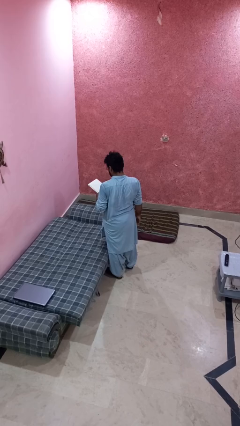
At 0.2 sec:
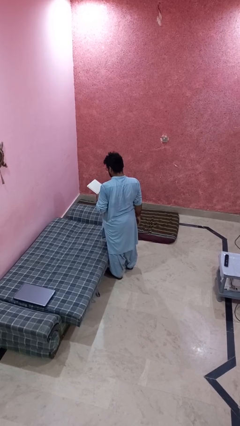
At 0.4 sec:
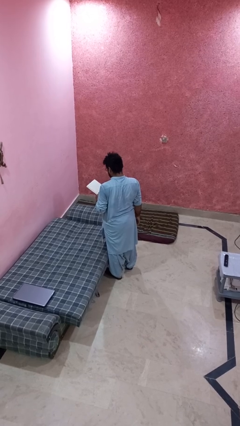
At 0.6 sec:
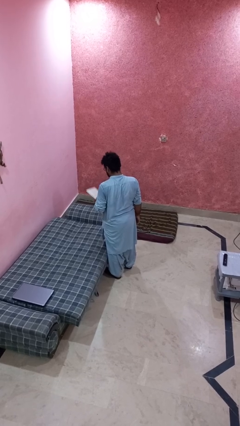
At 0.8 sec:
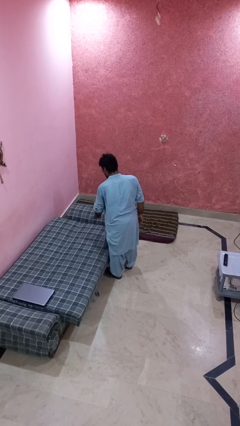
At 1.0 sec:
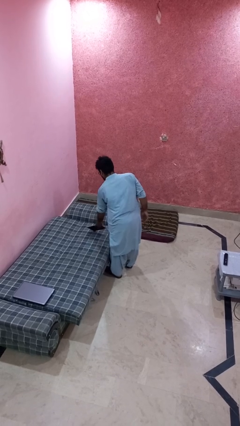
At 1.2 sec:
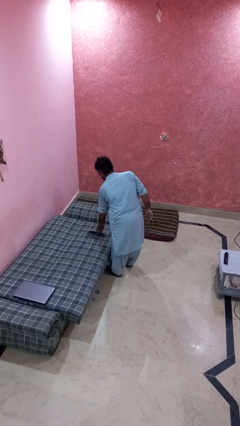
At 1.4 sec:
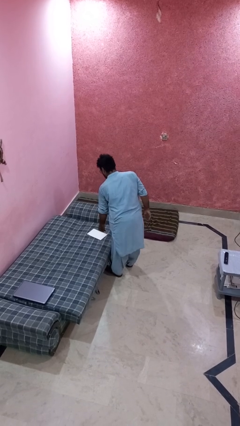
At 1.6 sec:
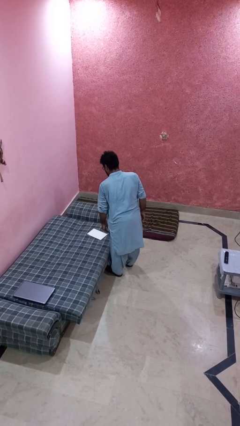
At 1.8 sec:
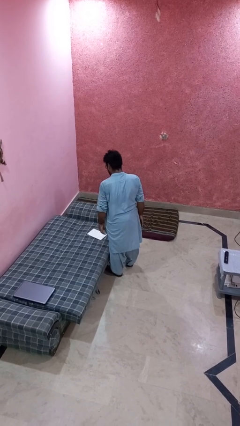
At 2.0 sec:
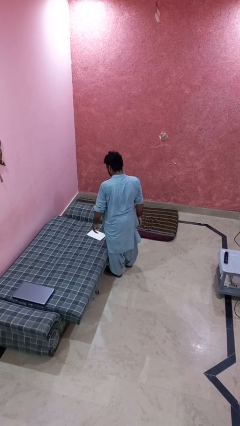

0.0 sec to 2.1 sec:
person puts down object on bed

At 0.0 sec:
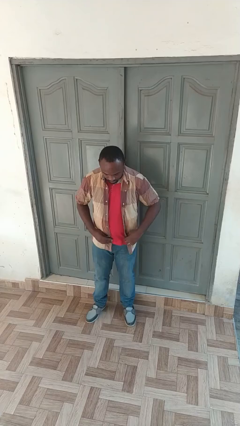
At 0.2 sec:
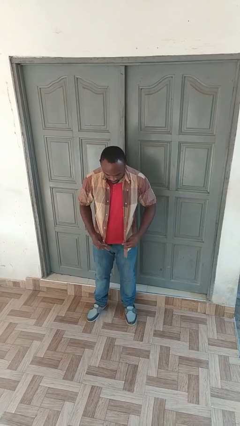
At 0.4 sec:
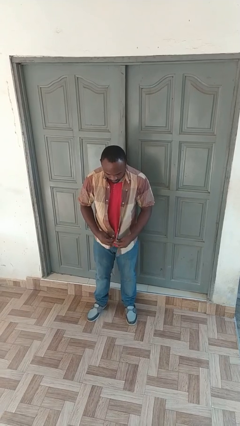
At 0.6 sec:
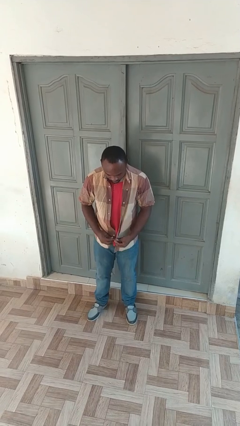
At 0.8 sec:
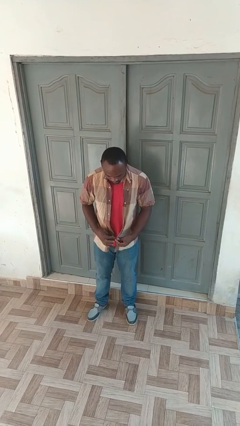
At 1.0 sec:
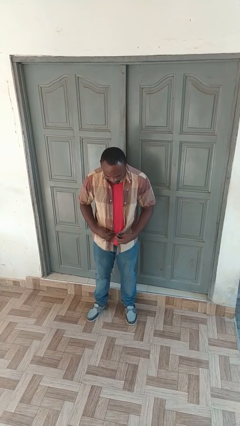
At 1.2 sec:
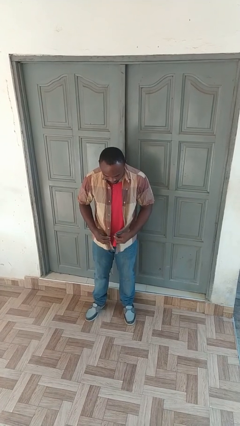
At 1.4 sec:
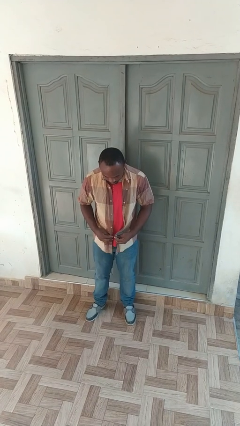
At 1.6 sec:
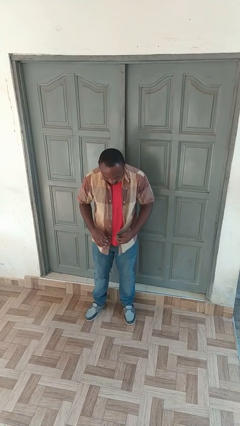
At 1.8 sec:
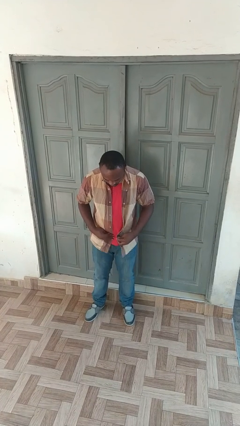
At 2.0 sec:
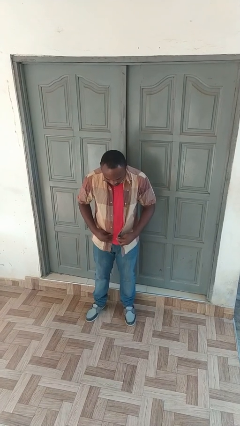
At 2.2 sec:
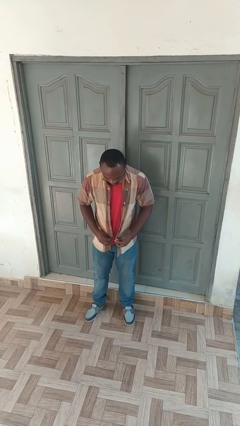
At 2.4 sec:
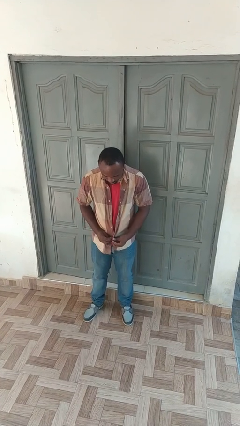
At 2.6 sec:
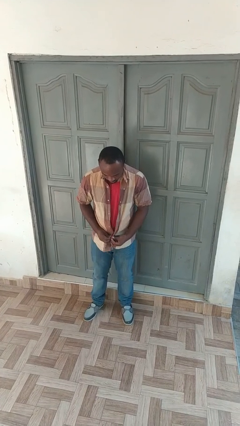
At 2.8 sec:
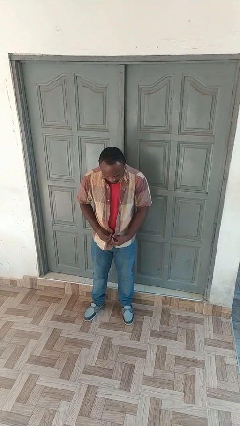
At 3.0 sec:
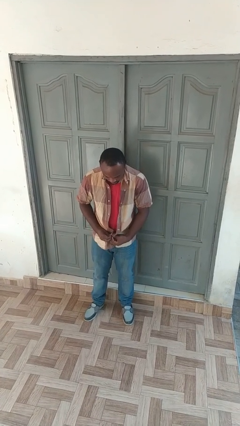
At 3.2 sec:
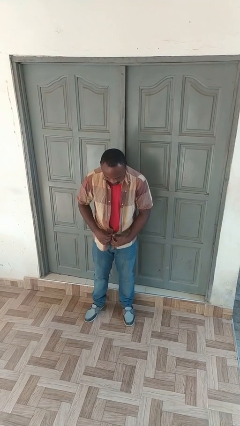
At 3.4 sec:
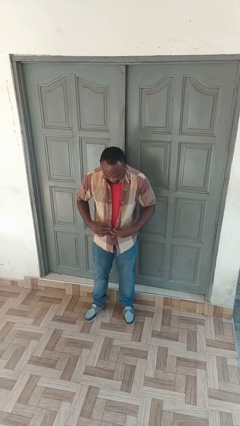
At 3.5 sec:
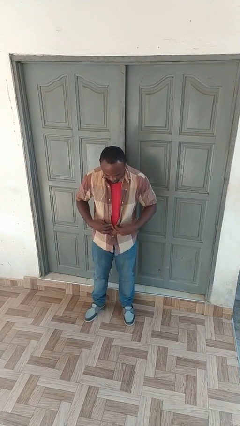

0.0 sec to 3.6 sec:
person buttons shirt

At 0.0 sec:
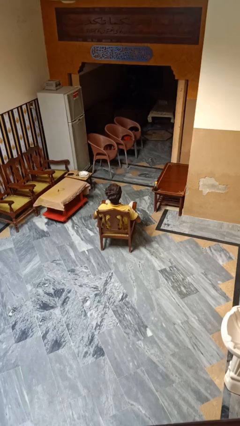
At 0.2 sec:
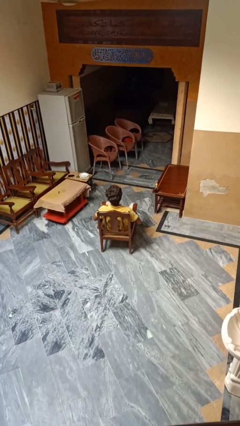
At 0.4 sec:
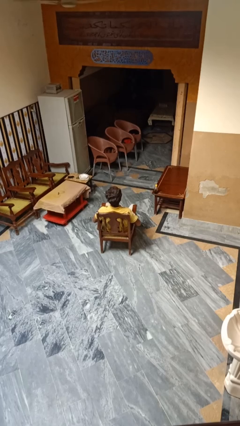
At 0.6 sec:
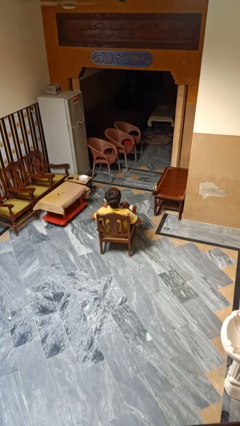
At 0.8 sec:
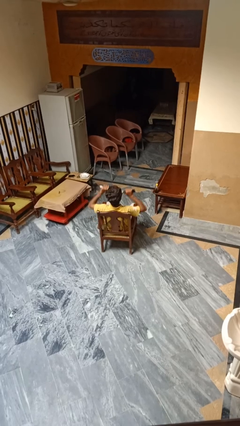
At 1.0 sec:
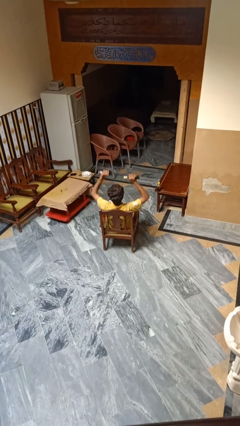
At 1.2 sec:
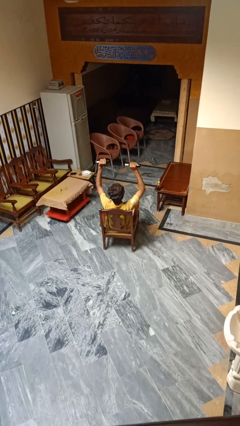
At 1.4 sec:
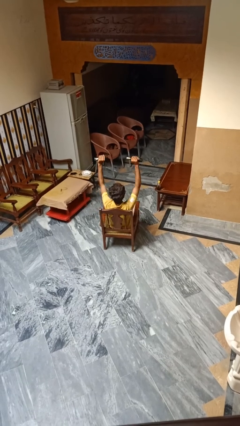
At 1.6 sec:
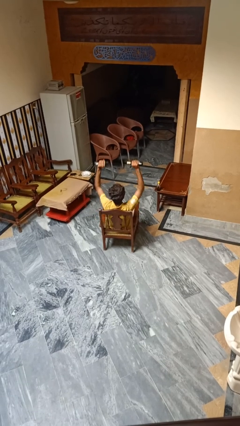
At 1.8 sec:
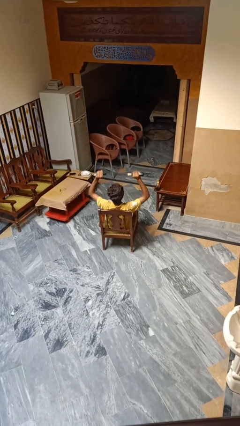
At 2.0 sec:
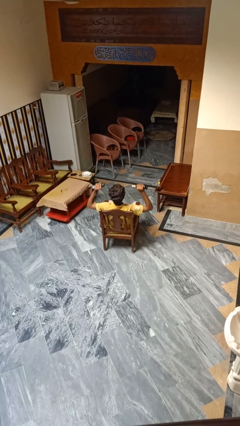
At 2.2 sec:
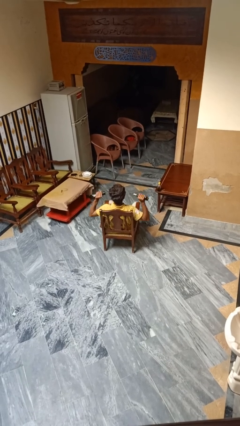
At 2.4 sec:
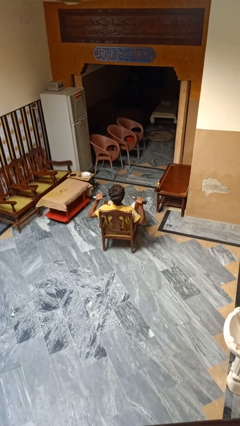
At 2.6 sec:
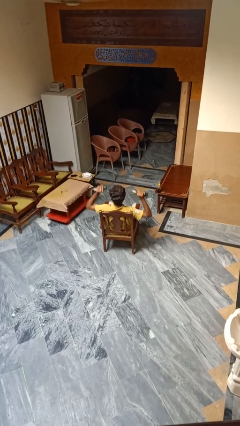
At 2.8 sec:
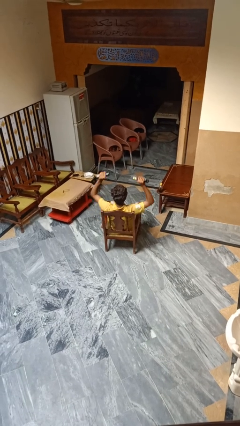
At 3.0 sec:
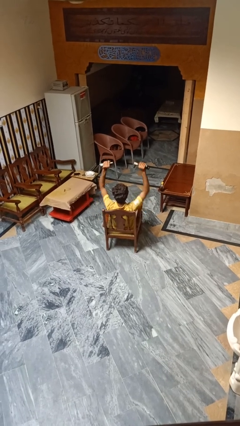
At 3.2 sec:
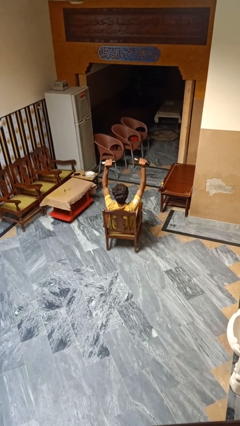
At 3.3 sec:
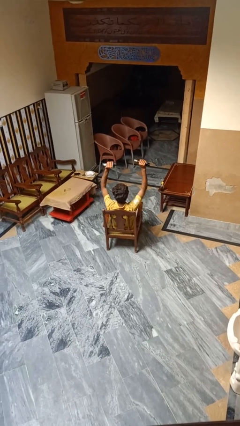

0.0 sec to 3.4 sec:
person lifts dumbbells

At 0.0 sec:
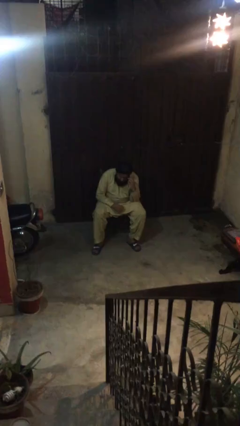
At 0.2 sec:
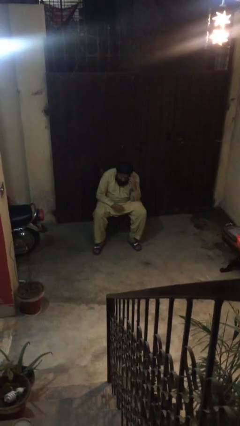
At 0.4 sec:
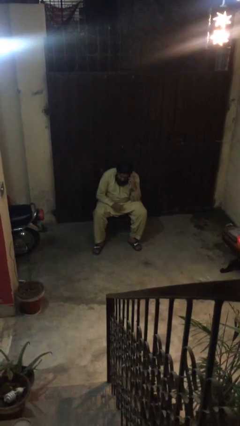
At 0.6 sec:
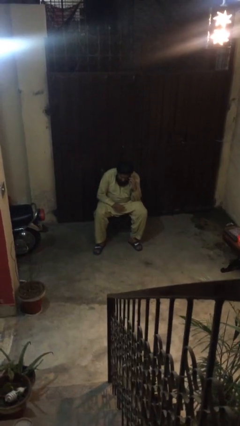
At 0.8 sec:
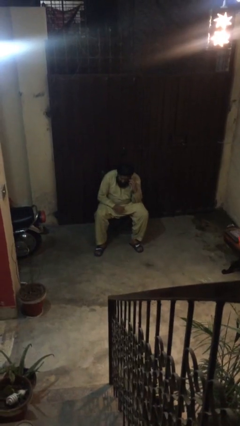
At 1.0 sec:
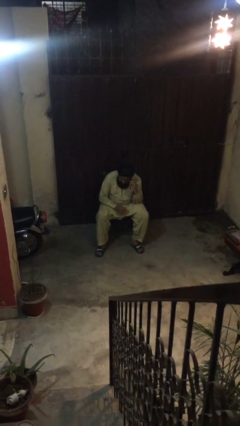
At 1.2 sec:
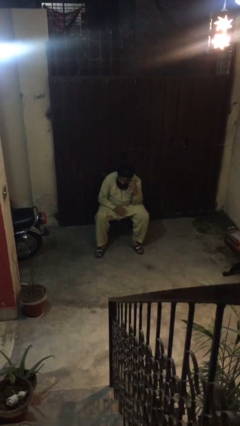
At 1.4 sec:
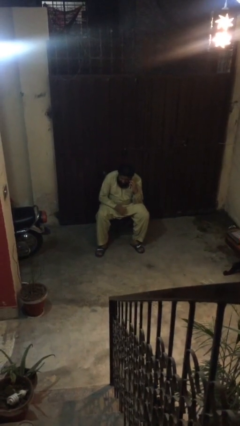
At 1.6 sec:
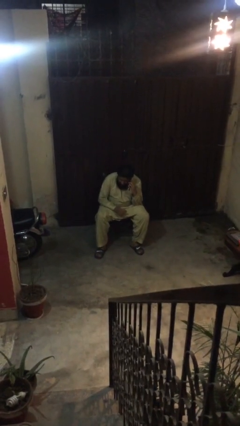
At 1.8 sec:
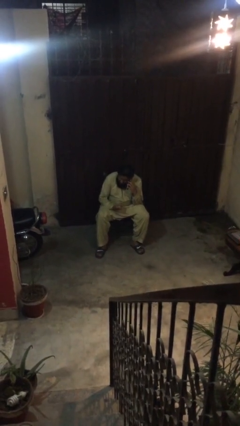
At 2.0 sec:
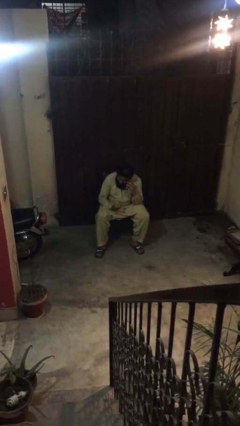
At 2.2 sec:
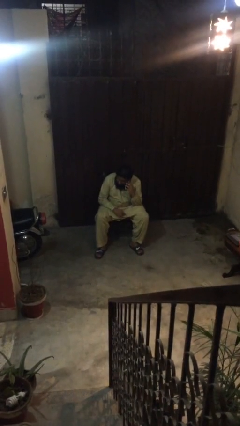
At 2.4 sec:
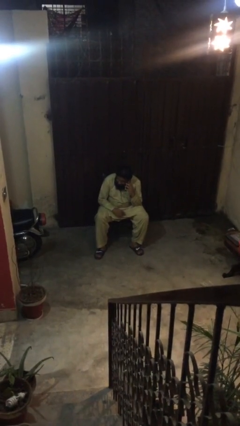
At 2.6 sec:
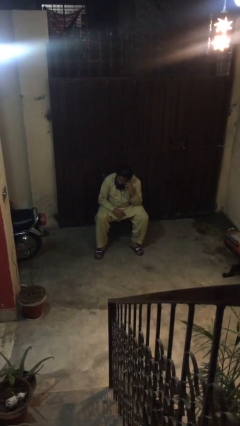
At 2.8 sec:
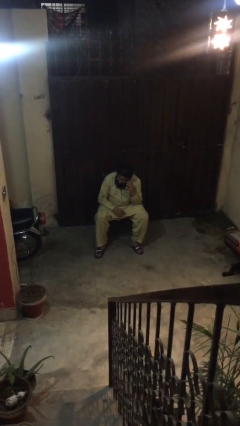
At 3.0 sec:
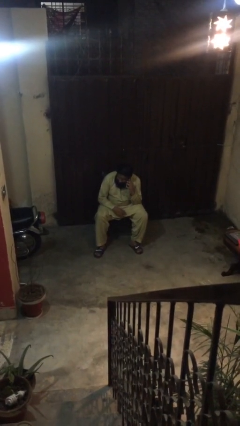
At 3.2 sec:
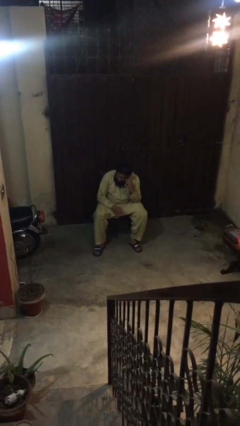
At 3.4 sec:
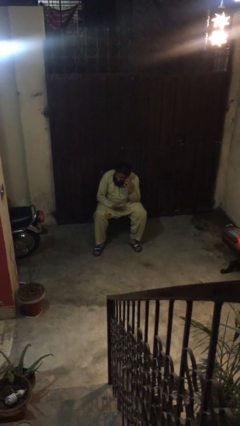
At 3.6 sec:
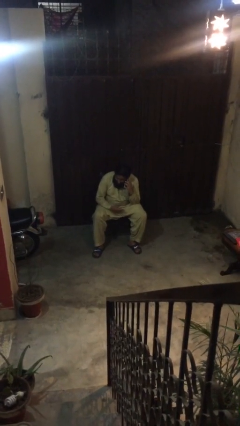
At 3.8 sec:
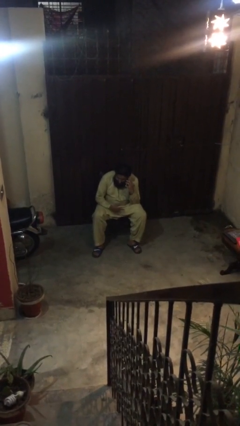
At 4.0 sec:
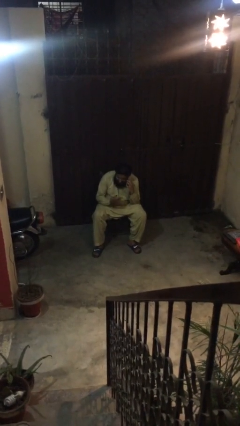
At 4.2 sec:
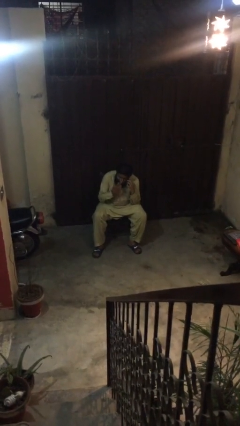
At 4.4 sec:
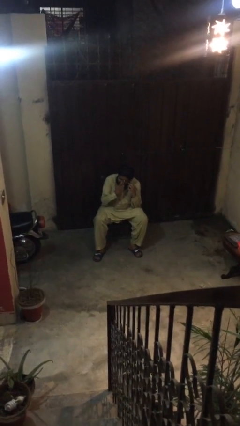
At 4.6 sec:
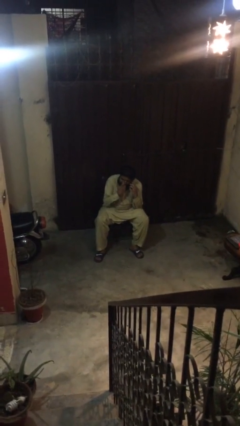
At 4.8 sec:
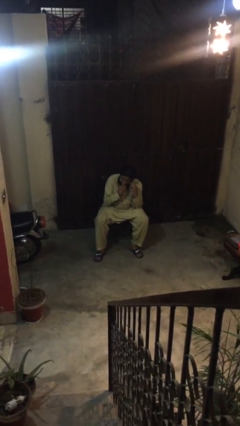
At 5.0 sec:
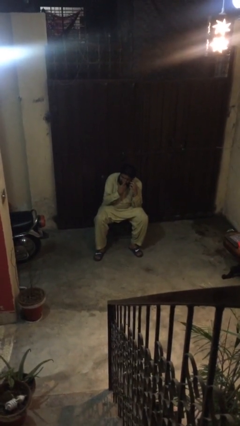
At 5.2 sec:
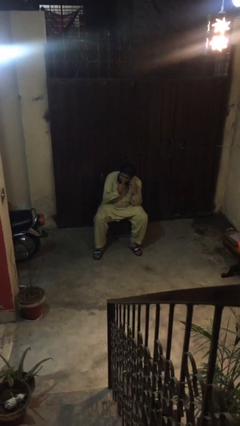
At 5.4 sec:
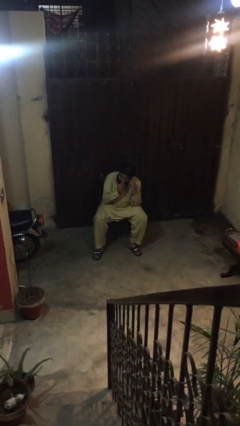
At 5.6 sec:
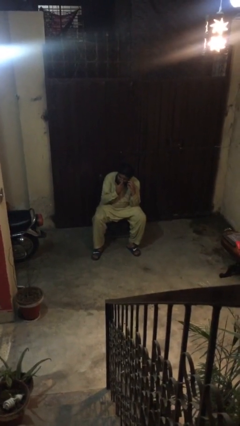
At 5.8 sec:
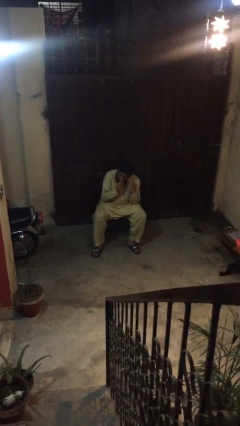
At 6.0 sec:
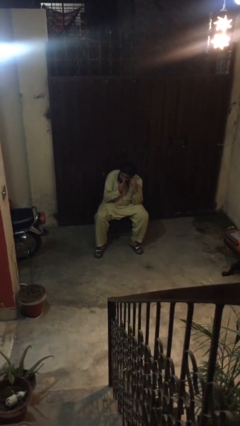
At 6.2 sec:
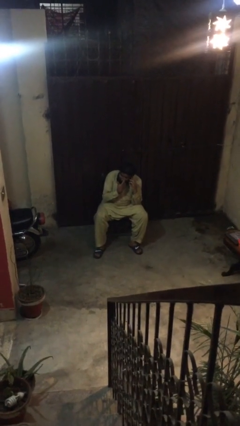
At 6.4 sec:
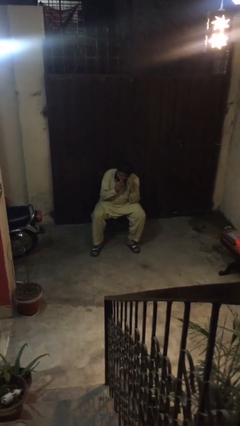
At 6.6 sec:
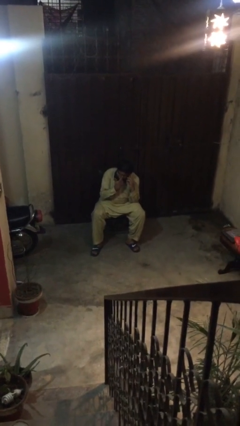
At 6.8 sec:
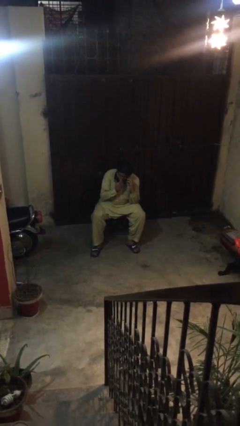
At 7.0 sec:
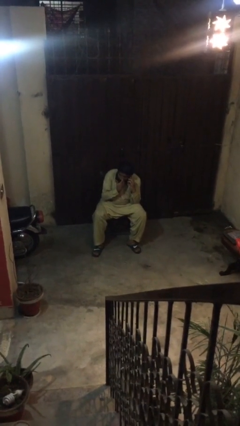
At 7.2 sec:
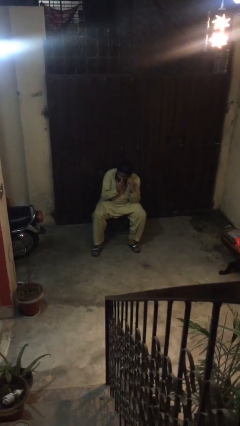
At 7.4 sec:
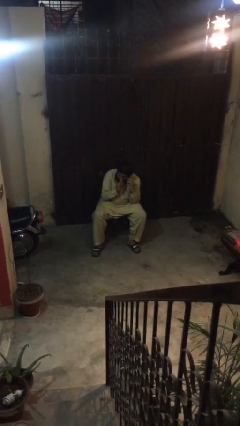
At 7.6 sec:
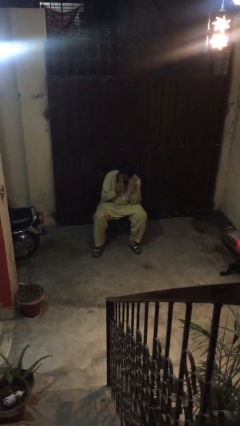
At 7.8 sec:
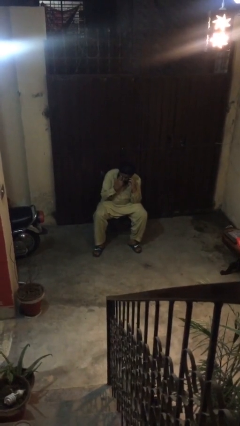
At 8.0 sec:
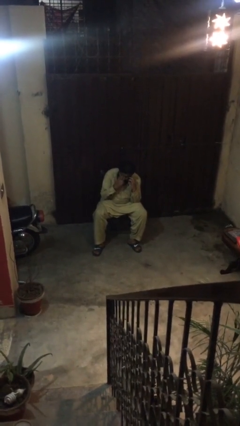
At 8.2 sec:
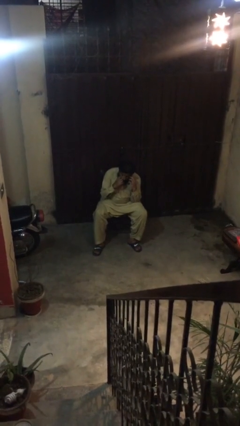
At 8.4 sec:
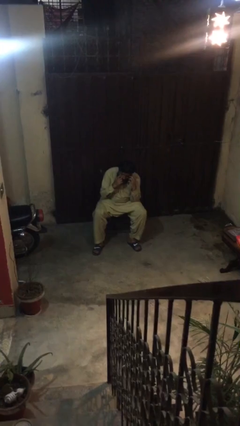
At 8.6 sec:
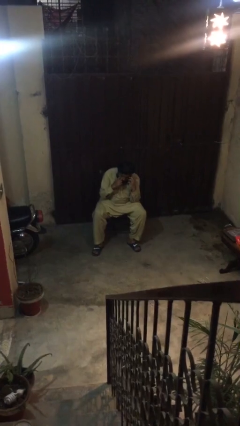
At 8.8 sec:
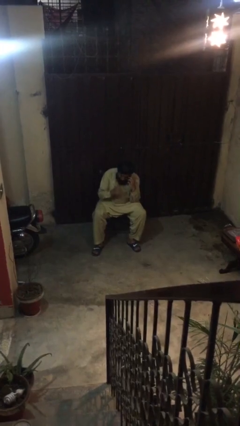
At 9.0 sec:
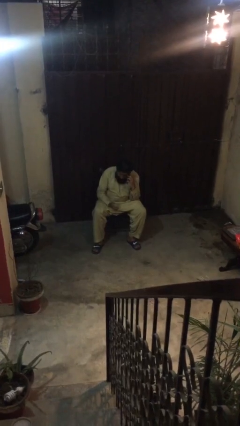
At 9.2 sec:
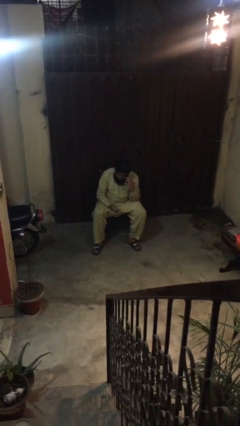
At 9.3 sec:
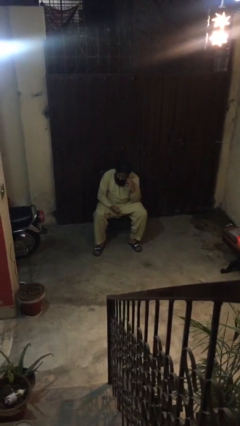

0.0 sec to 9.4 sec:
person talks on phone
